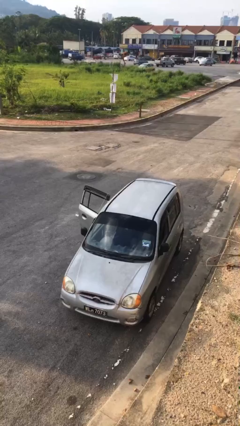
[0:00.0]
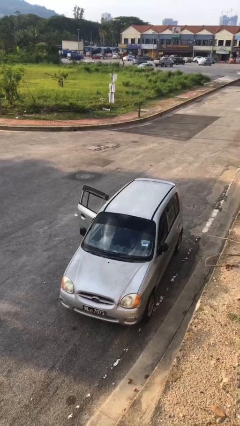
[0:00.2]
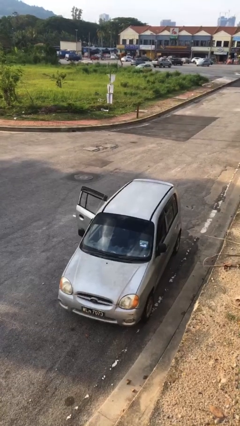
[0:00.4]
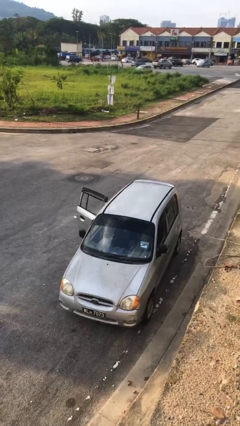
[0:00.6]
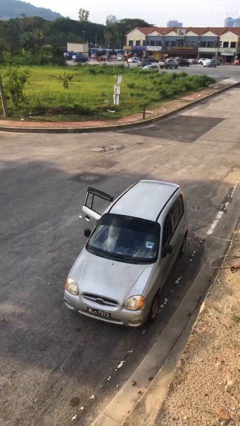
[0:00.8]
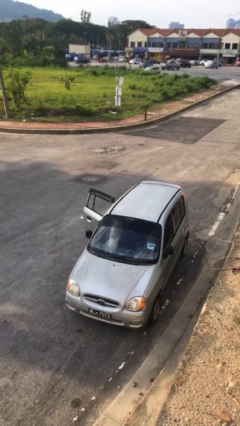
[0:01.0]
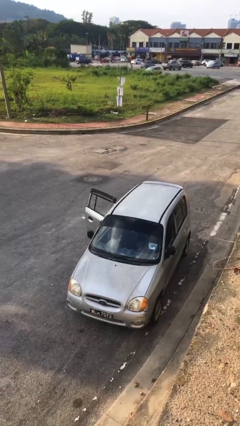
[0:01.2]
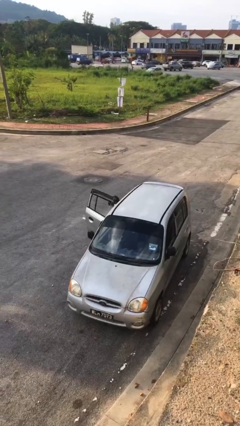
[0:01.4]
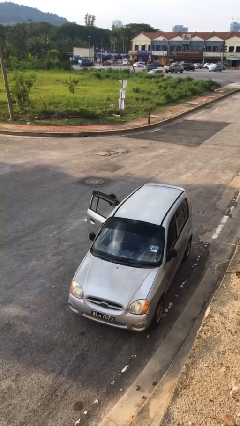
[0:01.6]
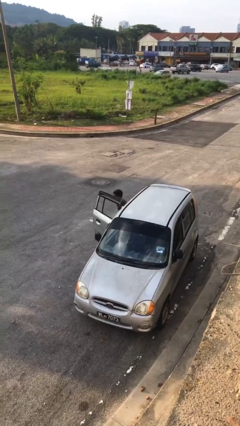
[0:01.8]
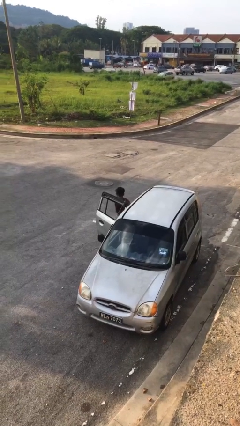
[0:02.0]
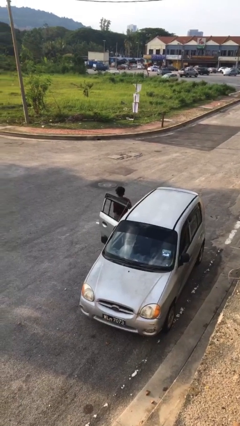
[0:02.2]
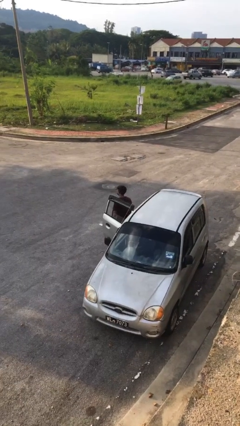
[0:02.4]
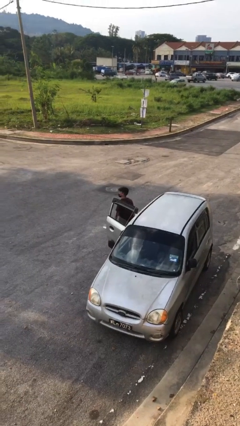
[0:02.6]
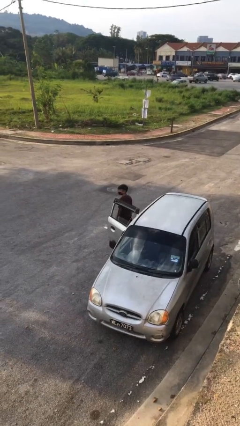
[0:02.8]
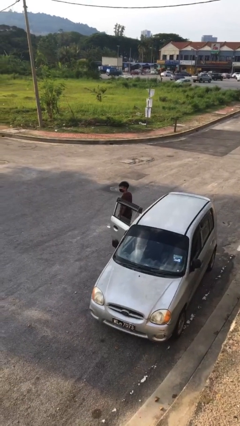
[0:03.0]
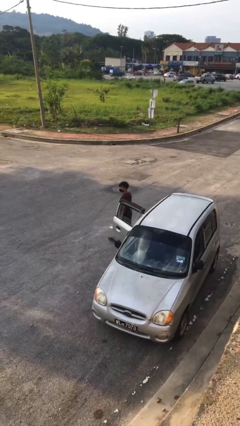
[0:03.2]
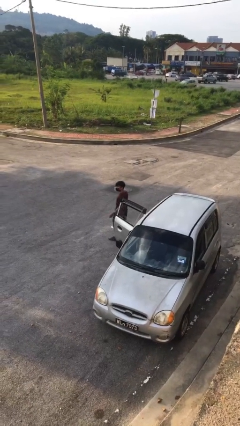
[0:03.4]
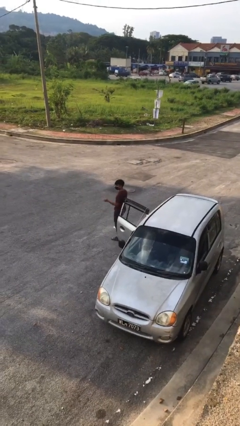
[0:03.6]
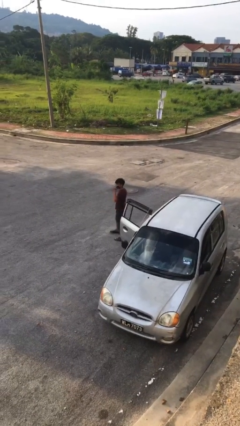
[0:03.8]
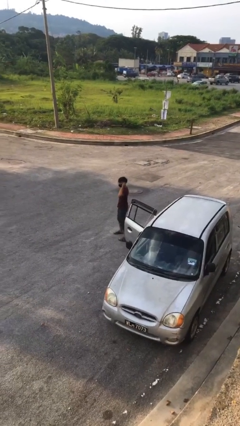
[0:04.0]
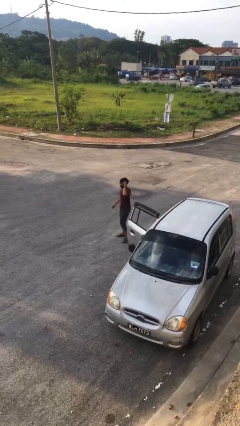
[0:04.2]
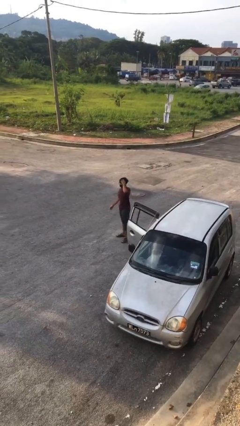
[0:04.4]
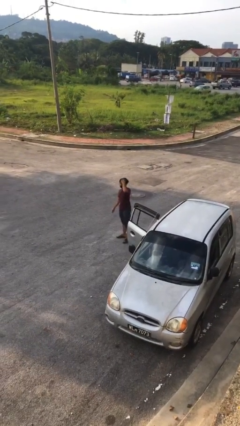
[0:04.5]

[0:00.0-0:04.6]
person exits car

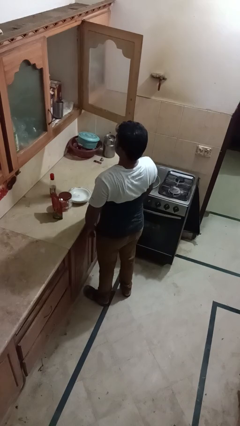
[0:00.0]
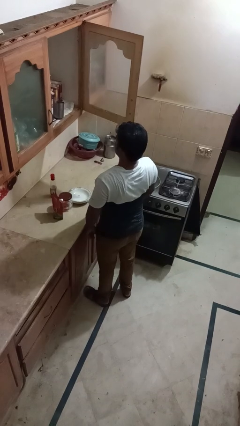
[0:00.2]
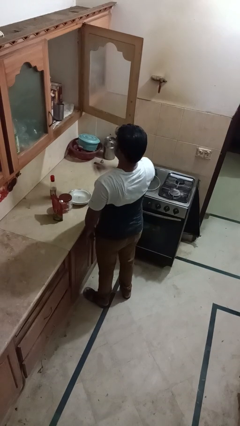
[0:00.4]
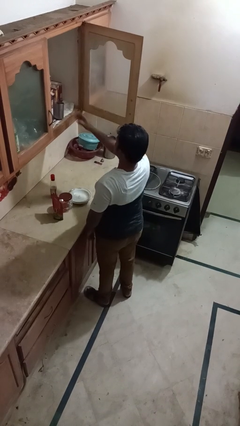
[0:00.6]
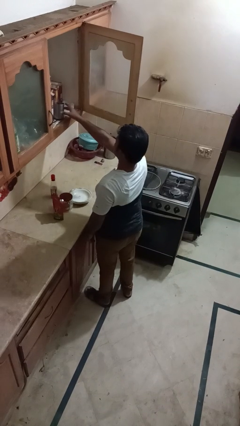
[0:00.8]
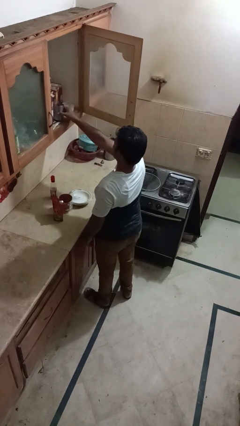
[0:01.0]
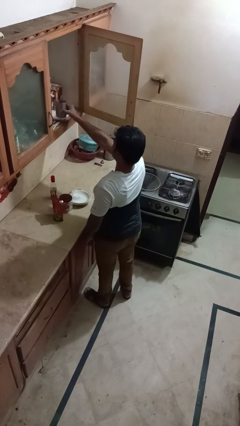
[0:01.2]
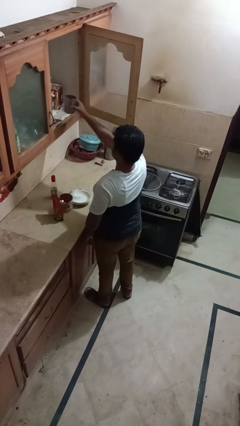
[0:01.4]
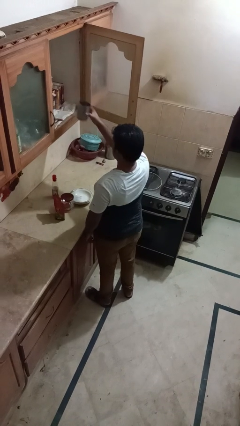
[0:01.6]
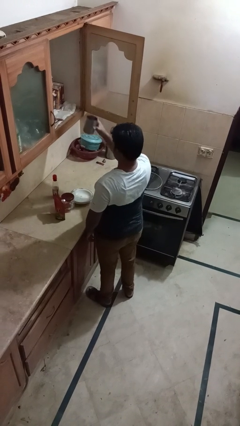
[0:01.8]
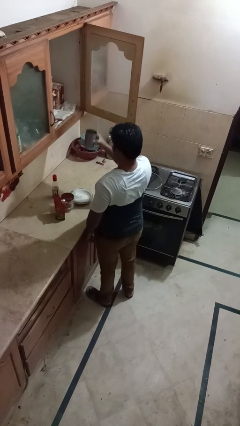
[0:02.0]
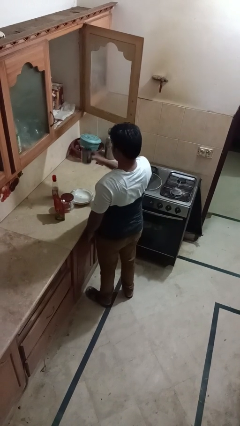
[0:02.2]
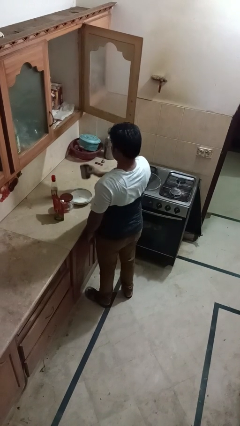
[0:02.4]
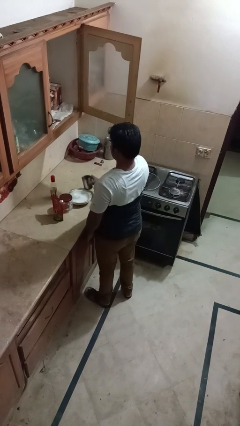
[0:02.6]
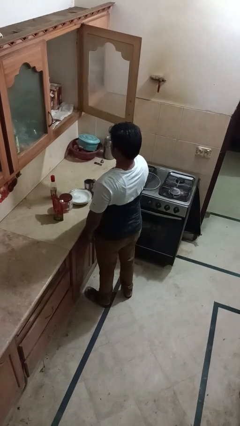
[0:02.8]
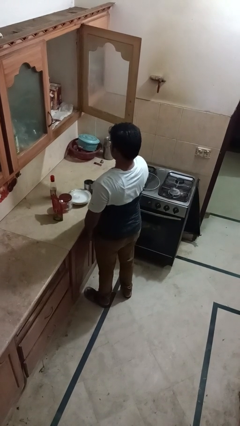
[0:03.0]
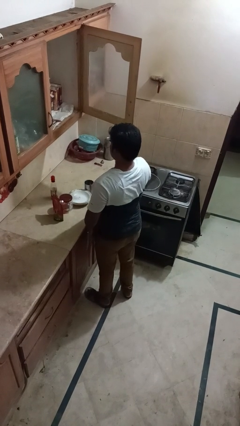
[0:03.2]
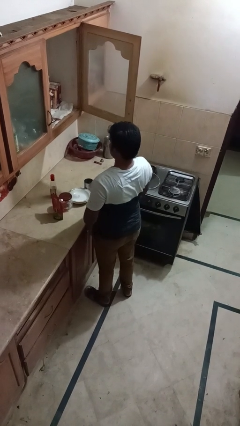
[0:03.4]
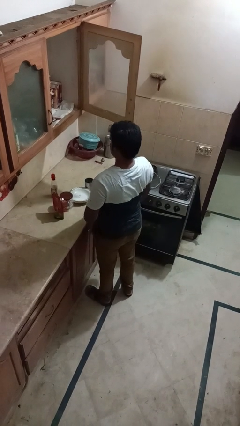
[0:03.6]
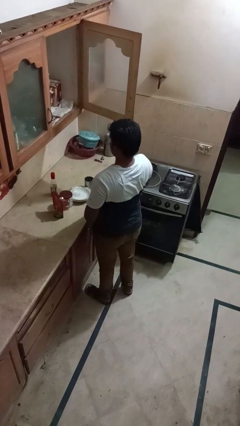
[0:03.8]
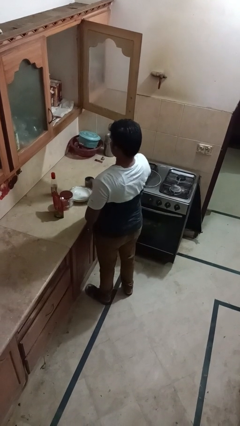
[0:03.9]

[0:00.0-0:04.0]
person takes object from cabinet

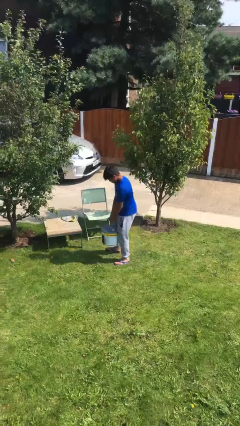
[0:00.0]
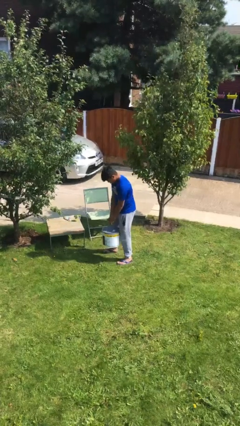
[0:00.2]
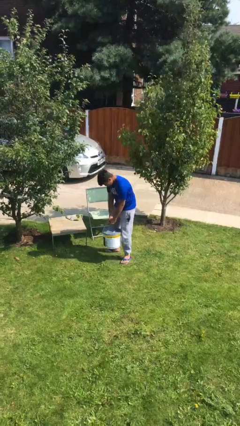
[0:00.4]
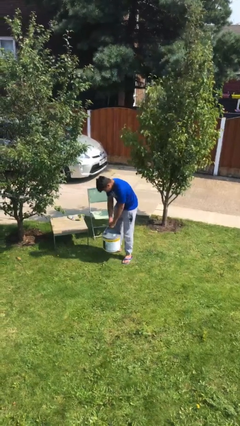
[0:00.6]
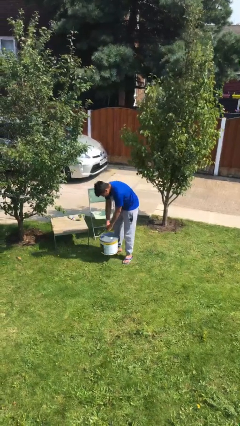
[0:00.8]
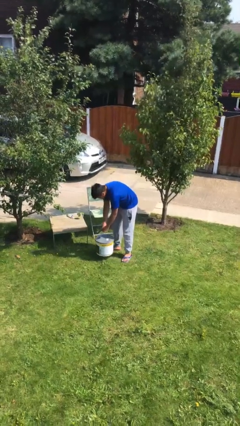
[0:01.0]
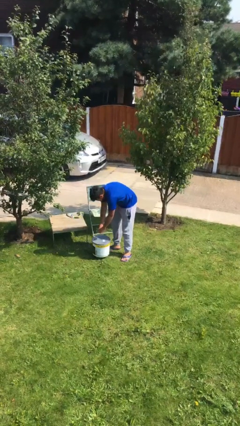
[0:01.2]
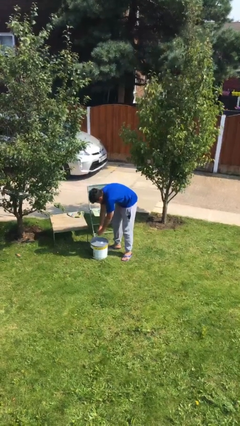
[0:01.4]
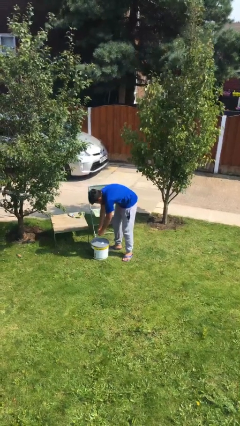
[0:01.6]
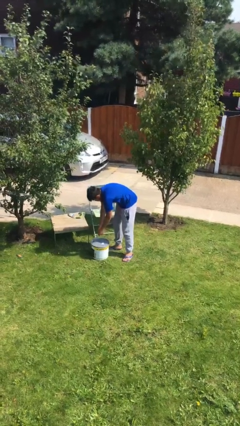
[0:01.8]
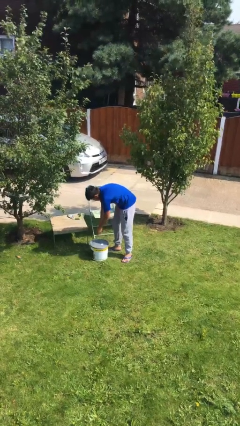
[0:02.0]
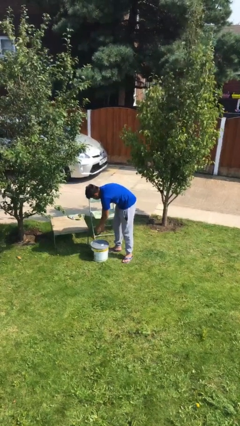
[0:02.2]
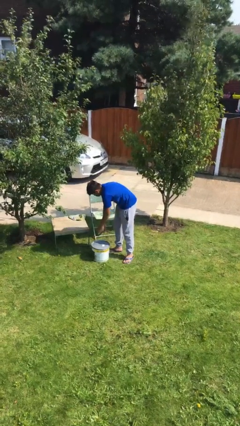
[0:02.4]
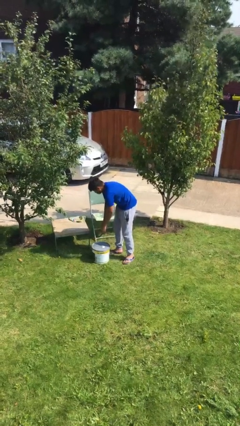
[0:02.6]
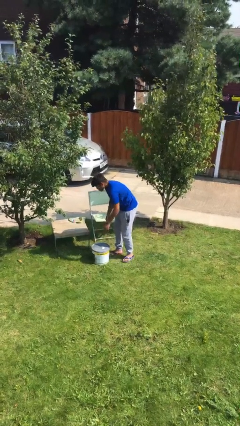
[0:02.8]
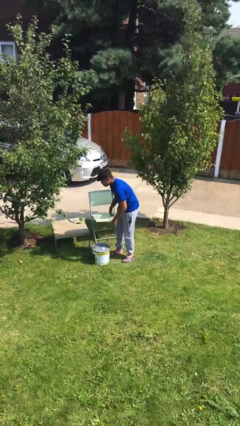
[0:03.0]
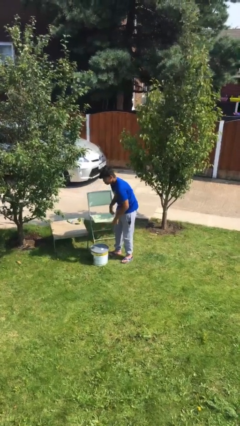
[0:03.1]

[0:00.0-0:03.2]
person puts down object on floor

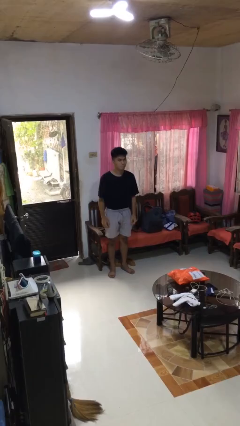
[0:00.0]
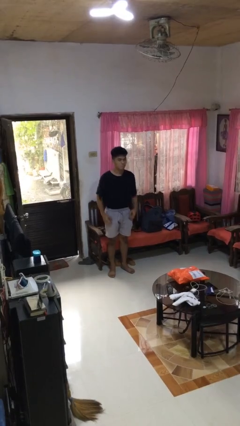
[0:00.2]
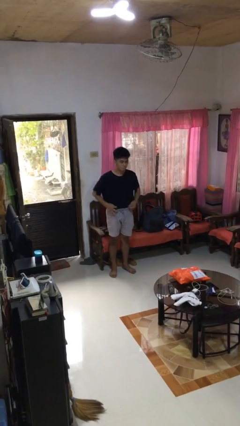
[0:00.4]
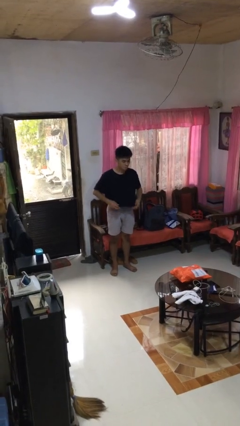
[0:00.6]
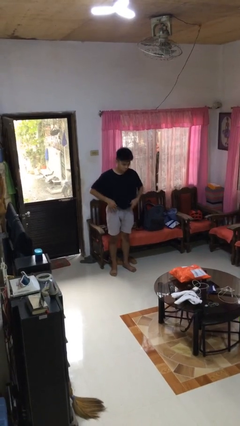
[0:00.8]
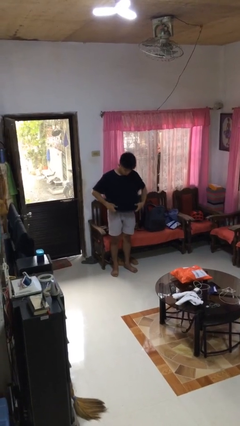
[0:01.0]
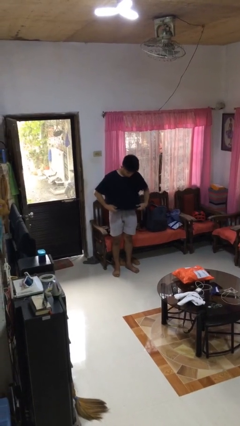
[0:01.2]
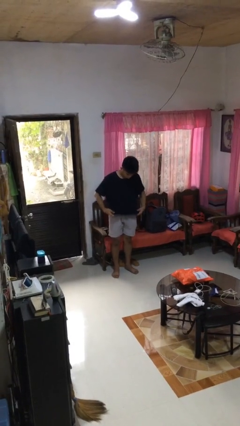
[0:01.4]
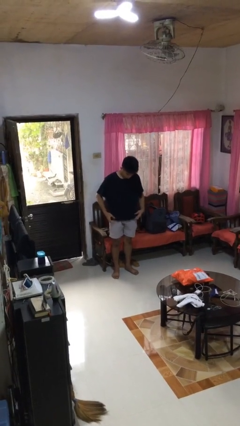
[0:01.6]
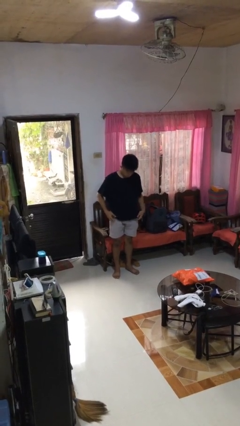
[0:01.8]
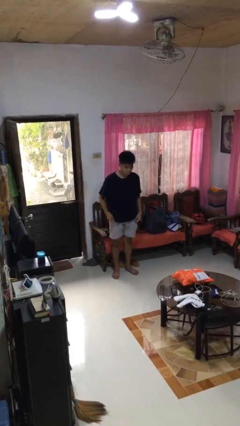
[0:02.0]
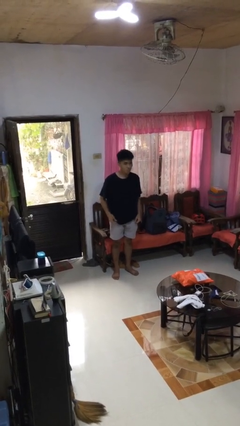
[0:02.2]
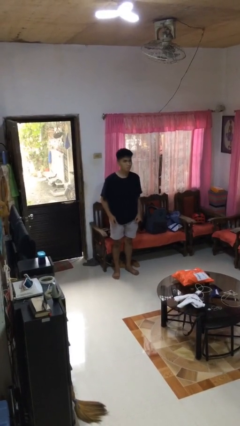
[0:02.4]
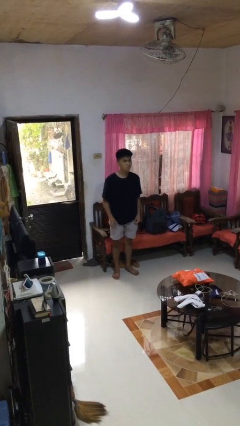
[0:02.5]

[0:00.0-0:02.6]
person untucks shirt

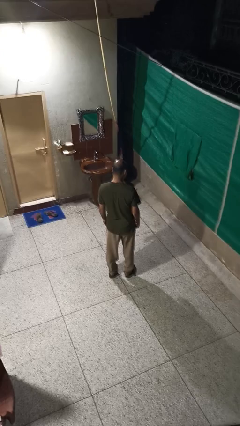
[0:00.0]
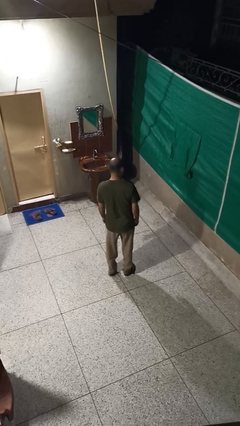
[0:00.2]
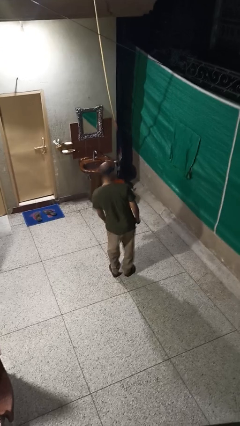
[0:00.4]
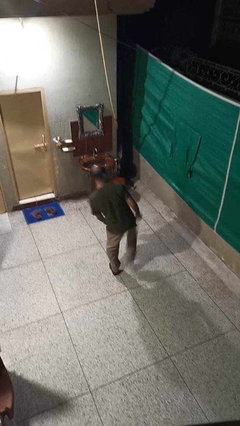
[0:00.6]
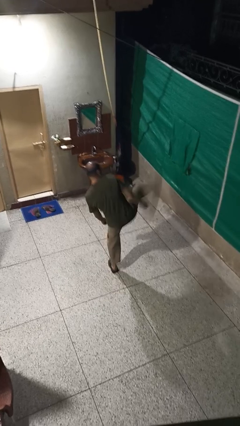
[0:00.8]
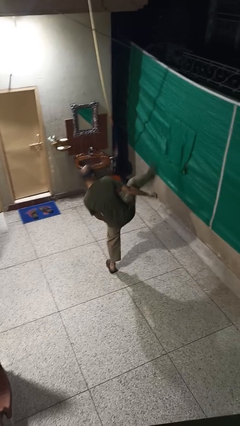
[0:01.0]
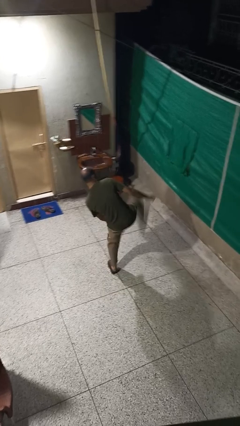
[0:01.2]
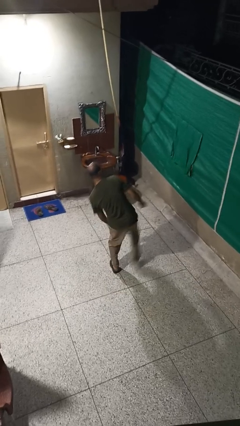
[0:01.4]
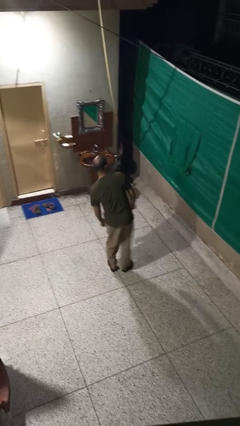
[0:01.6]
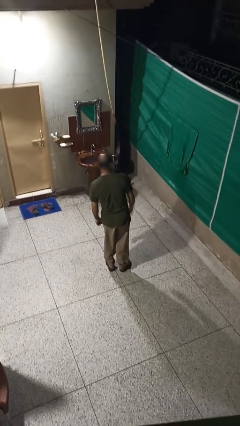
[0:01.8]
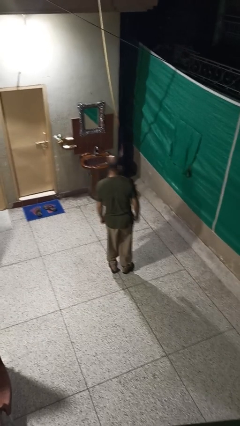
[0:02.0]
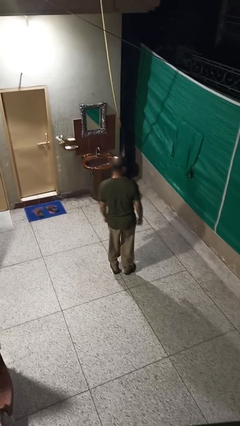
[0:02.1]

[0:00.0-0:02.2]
person karate kicks

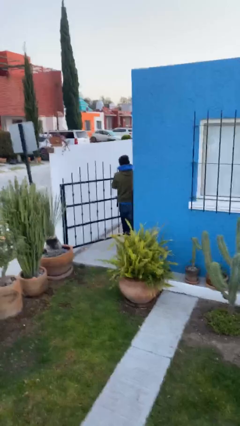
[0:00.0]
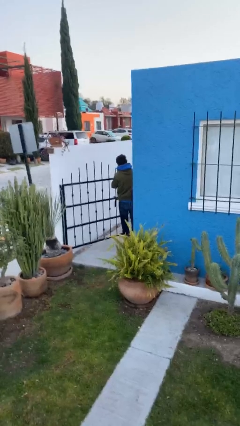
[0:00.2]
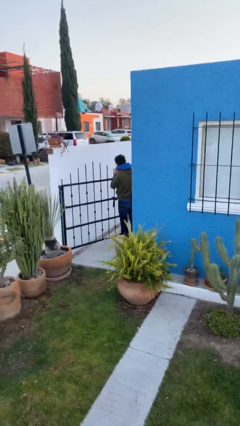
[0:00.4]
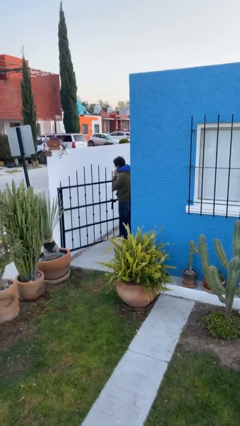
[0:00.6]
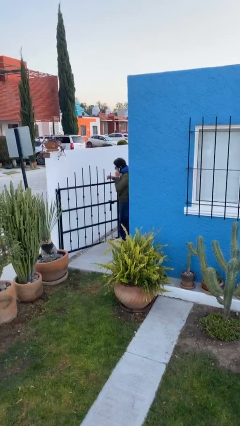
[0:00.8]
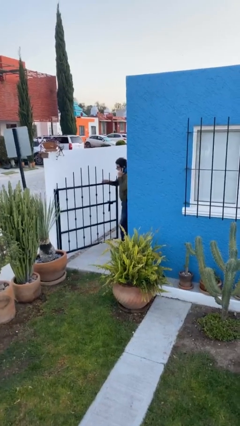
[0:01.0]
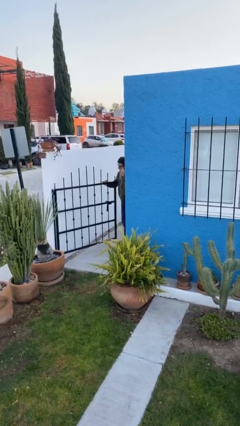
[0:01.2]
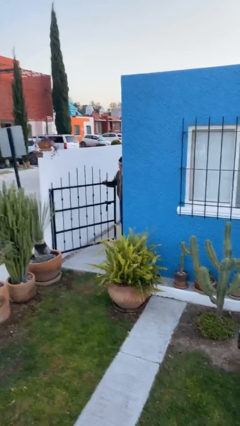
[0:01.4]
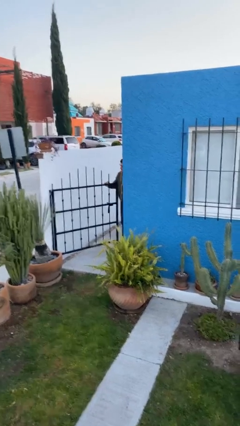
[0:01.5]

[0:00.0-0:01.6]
person exits scene through structure
